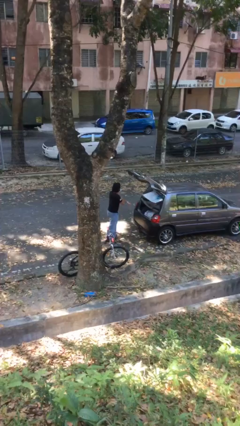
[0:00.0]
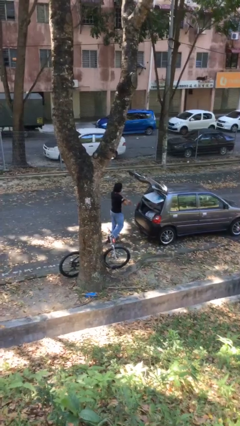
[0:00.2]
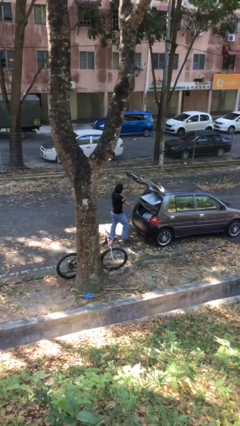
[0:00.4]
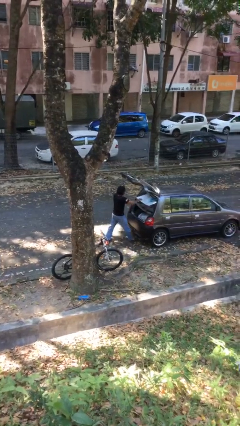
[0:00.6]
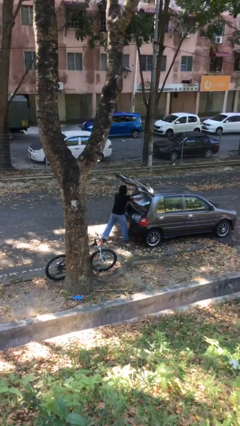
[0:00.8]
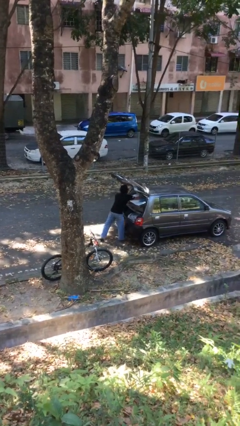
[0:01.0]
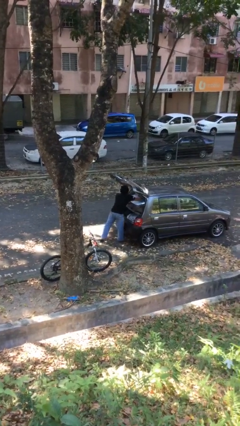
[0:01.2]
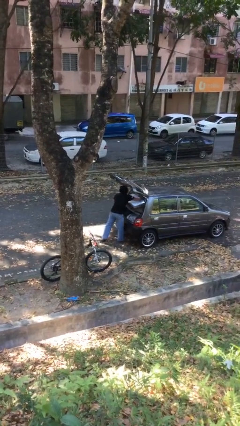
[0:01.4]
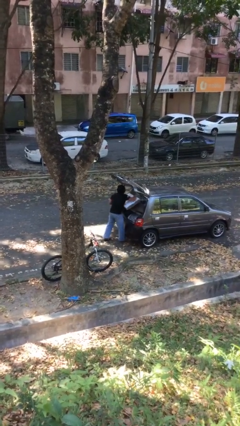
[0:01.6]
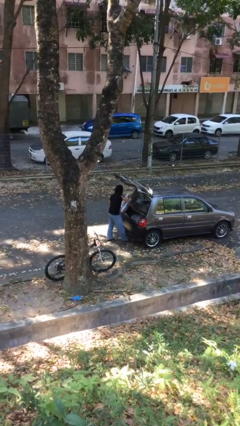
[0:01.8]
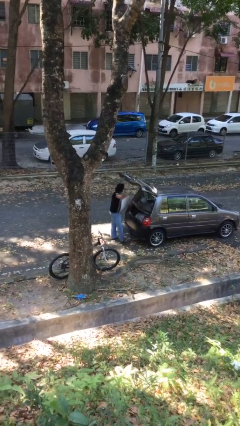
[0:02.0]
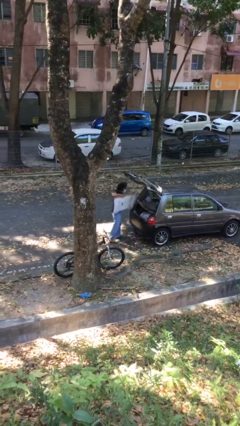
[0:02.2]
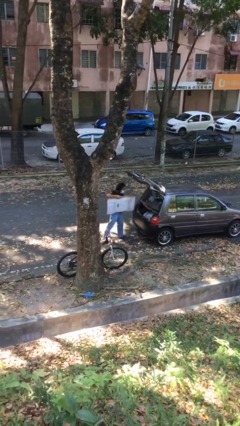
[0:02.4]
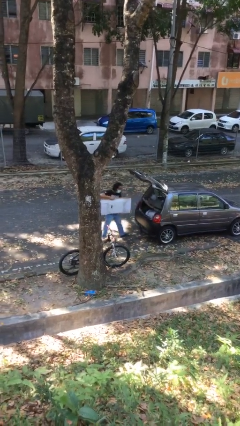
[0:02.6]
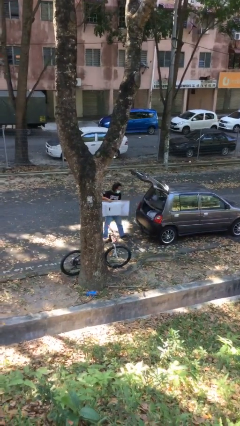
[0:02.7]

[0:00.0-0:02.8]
person unloads car

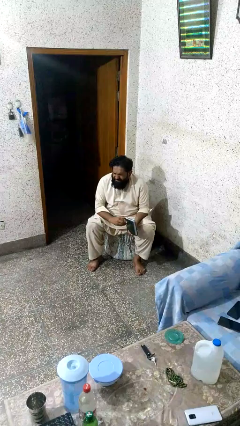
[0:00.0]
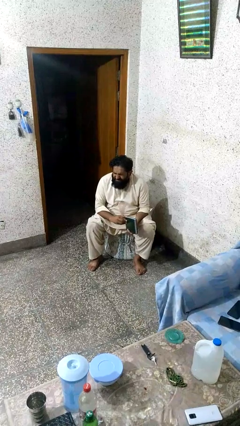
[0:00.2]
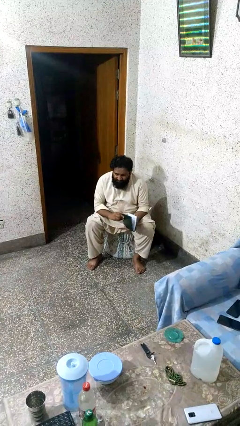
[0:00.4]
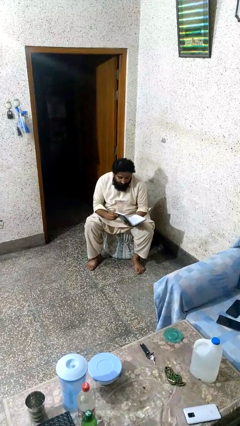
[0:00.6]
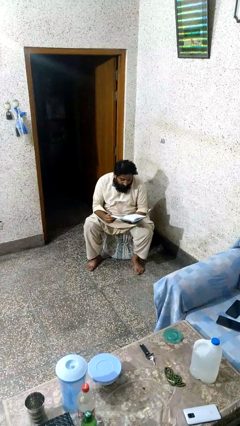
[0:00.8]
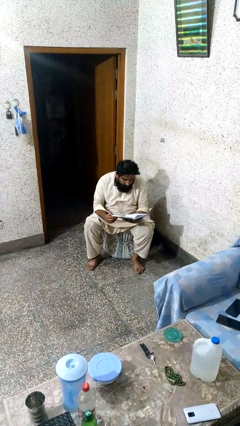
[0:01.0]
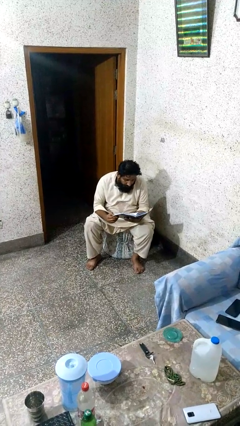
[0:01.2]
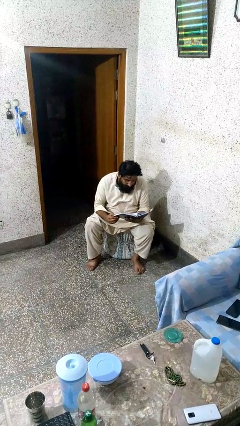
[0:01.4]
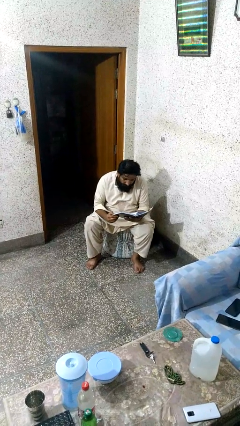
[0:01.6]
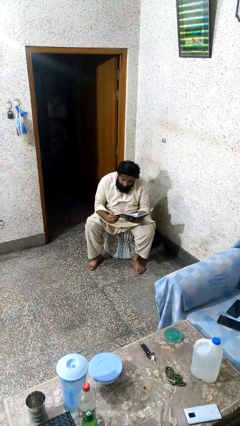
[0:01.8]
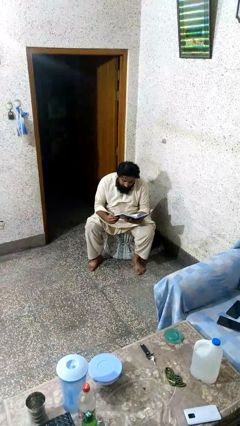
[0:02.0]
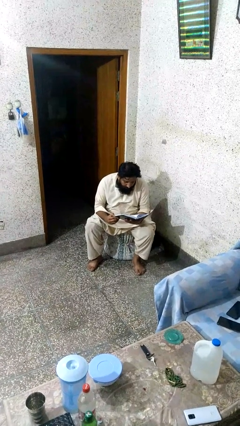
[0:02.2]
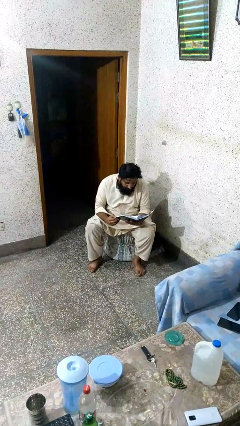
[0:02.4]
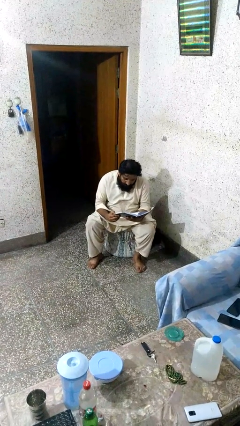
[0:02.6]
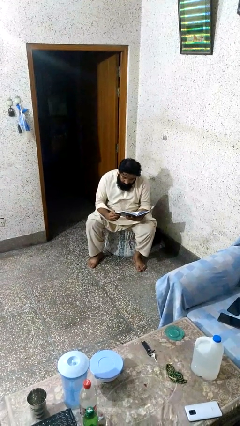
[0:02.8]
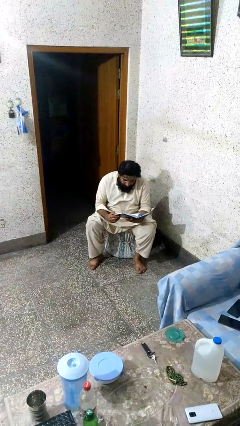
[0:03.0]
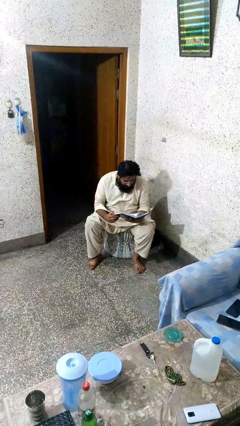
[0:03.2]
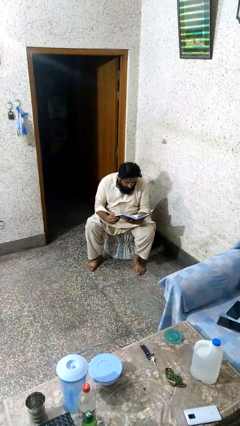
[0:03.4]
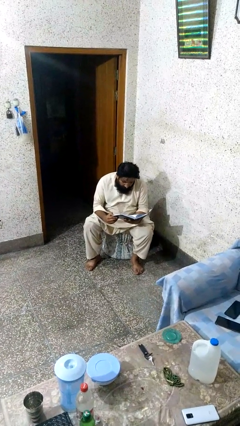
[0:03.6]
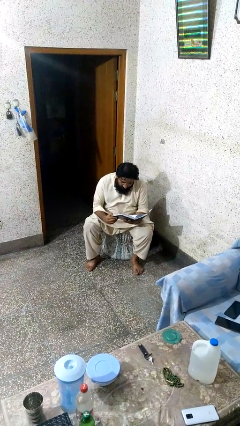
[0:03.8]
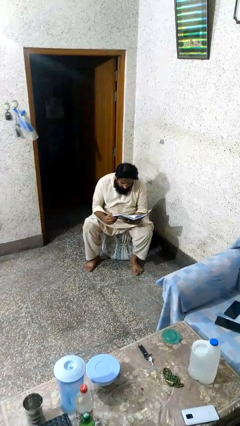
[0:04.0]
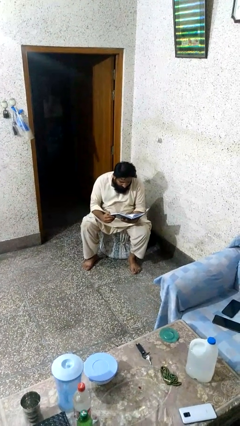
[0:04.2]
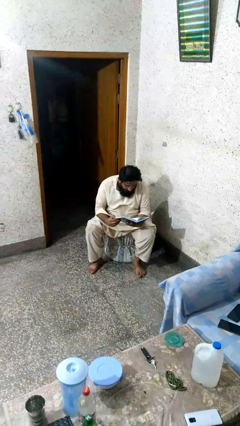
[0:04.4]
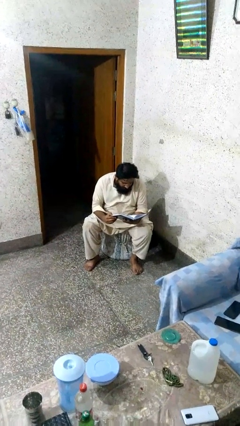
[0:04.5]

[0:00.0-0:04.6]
person reads book

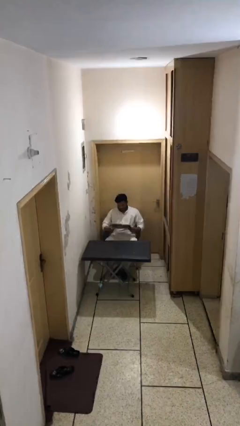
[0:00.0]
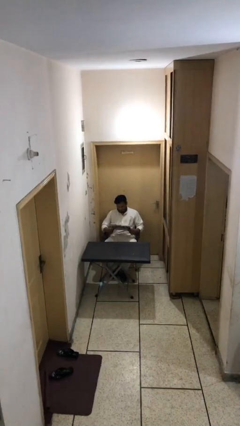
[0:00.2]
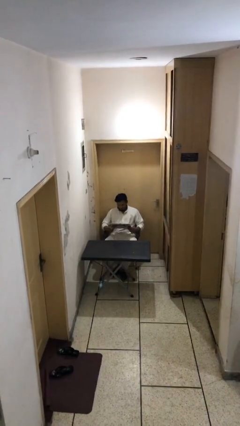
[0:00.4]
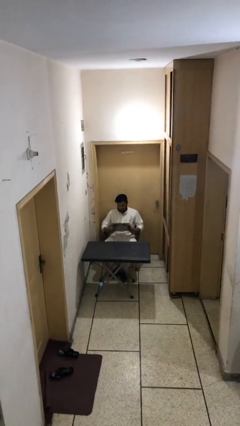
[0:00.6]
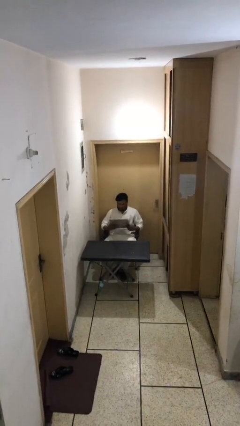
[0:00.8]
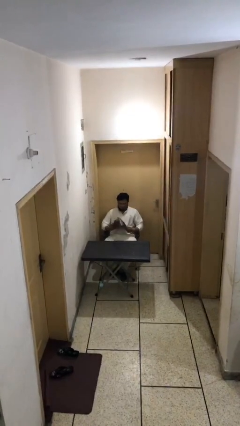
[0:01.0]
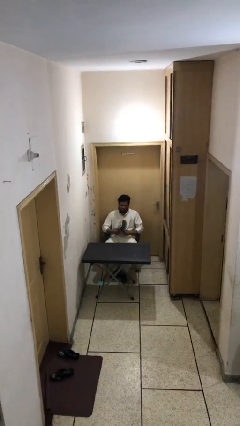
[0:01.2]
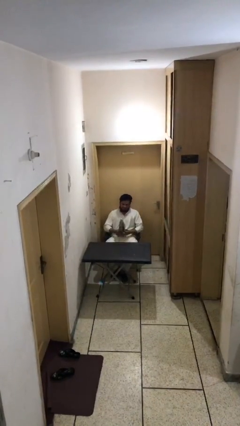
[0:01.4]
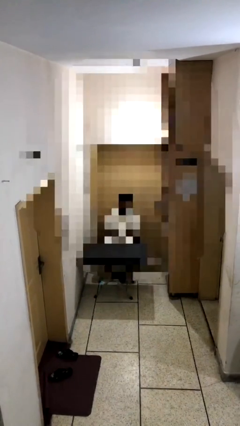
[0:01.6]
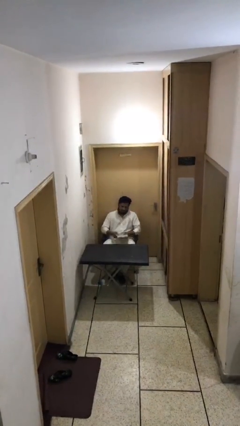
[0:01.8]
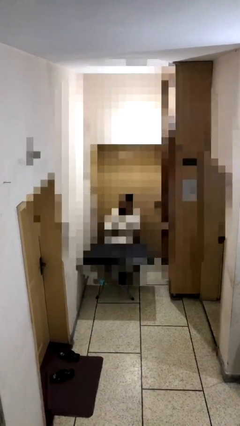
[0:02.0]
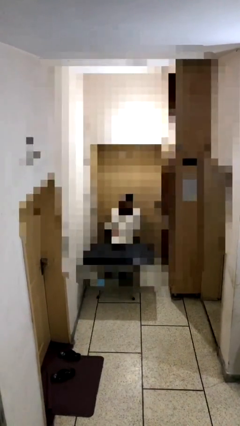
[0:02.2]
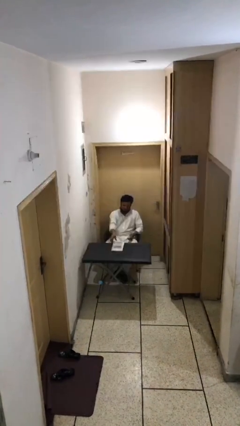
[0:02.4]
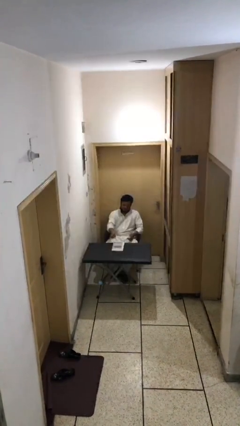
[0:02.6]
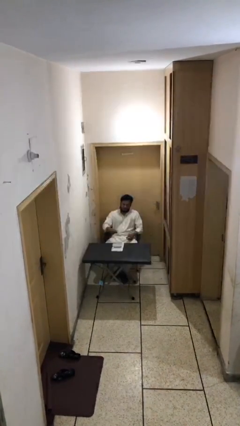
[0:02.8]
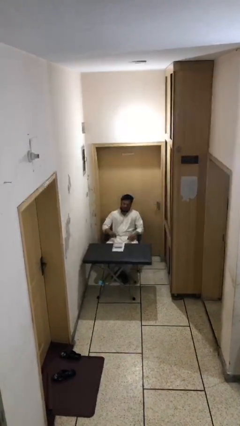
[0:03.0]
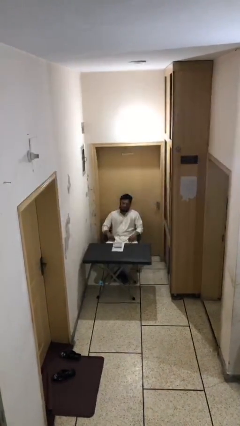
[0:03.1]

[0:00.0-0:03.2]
person puts down object on table

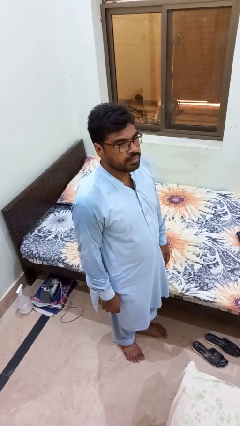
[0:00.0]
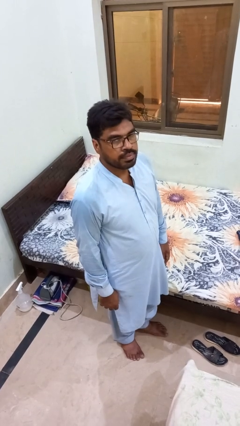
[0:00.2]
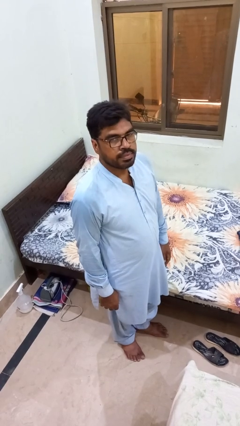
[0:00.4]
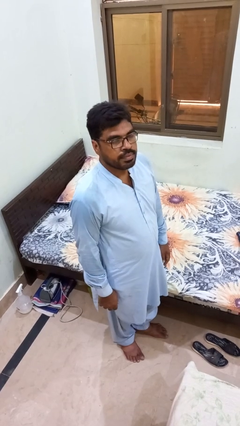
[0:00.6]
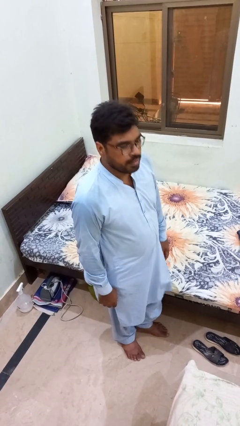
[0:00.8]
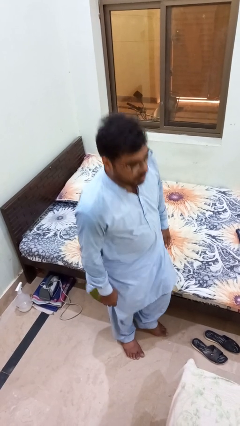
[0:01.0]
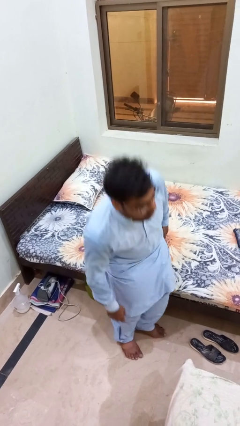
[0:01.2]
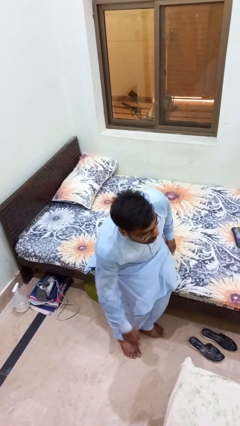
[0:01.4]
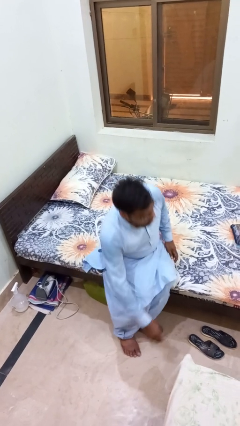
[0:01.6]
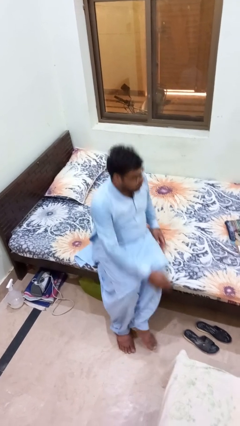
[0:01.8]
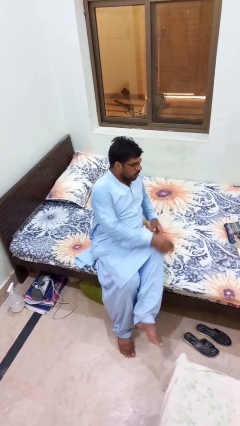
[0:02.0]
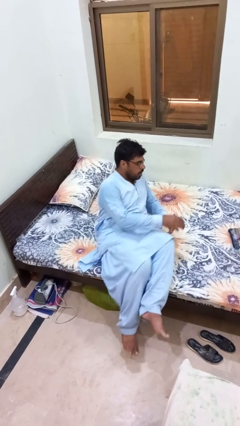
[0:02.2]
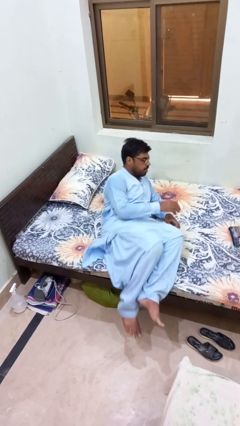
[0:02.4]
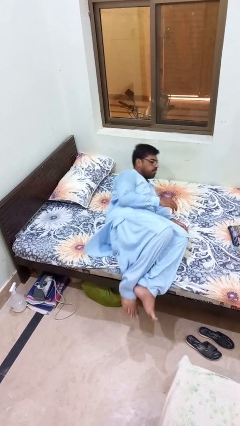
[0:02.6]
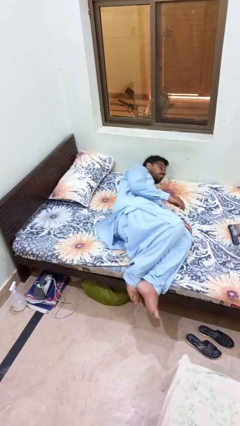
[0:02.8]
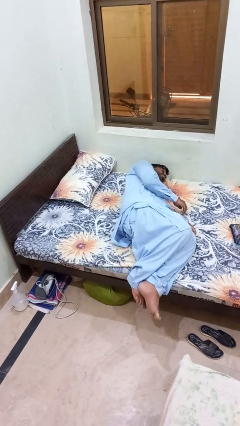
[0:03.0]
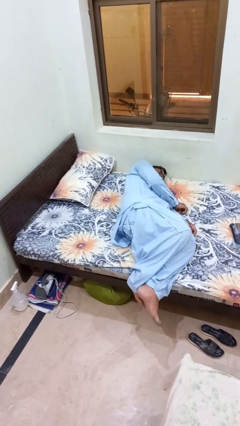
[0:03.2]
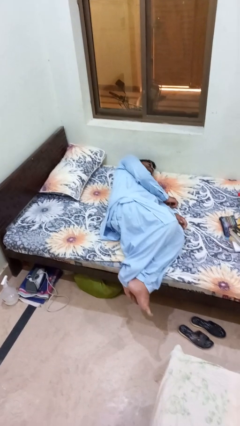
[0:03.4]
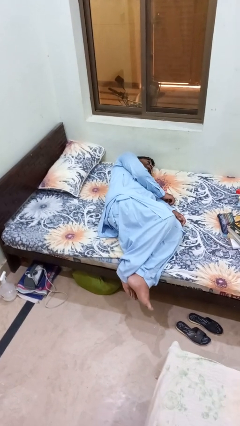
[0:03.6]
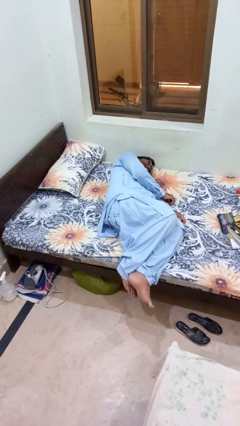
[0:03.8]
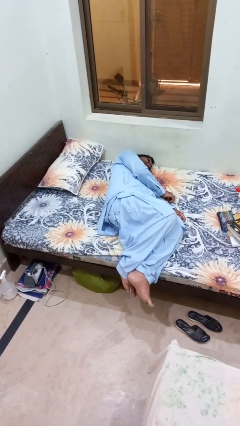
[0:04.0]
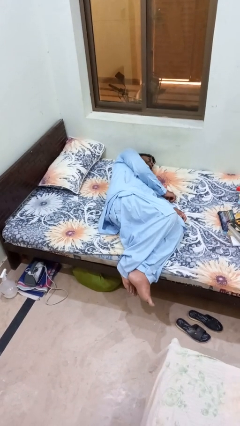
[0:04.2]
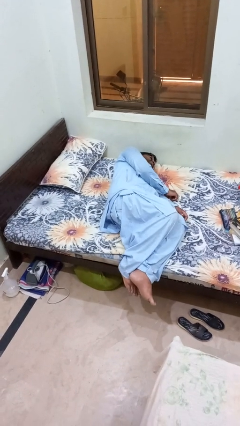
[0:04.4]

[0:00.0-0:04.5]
person lies down on bed

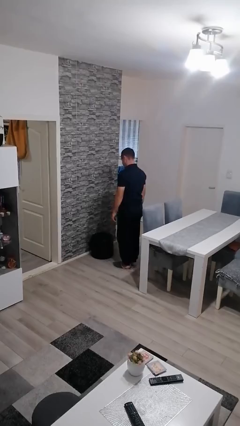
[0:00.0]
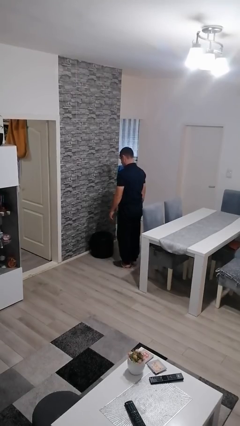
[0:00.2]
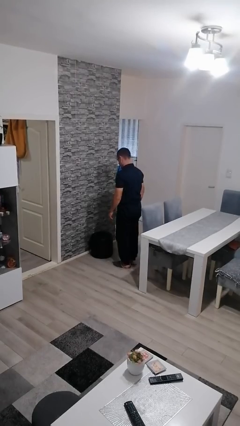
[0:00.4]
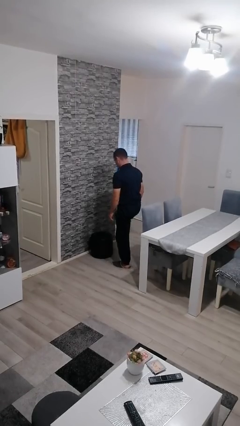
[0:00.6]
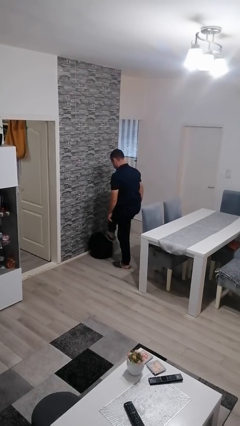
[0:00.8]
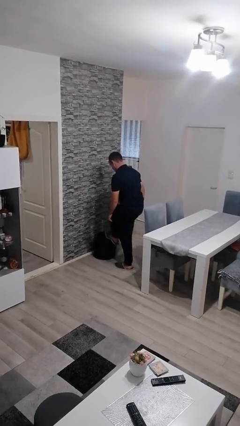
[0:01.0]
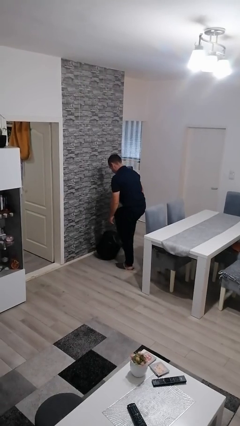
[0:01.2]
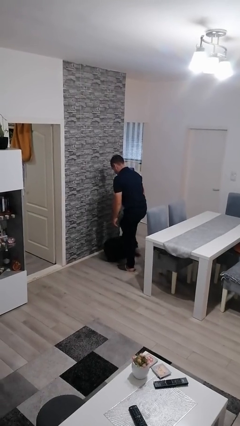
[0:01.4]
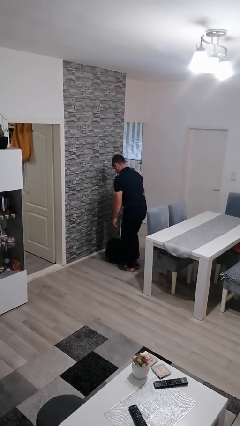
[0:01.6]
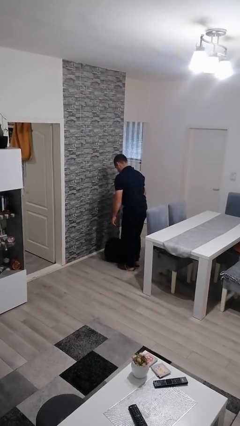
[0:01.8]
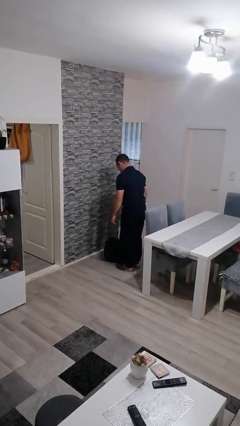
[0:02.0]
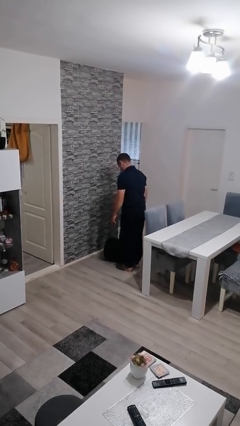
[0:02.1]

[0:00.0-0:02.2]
person knocks over furniture

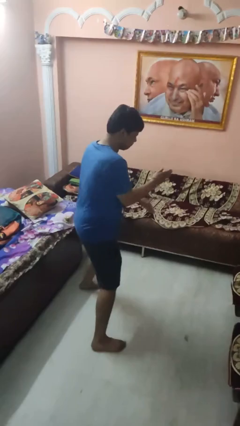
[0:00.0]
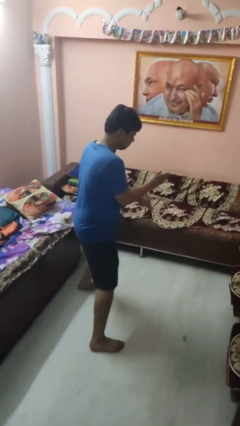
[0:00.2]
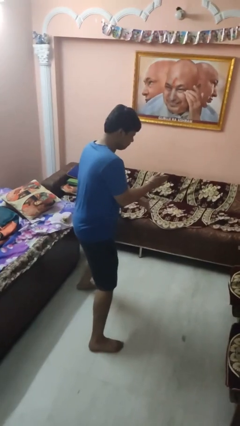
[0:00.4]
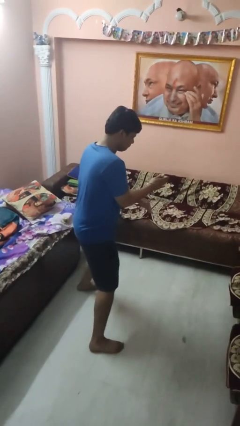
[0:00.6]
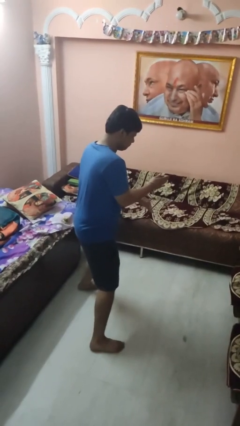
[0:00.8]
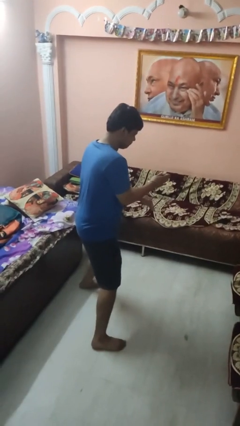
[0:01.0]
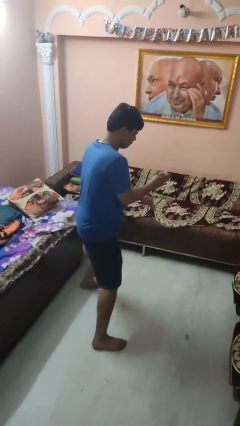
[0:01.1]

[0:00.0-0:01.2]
person karate chop
